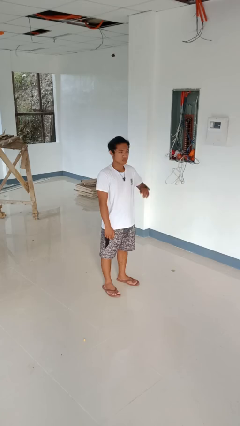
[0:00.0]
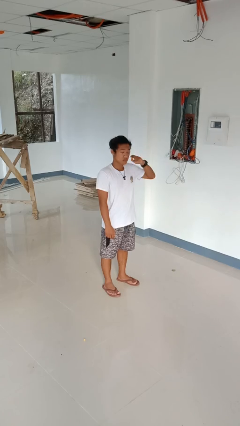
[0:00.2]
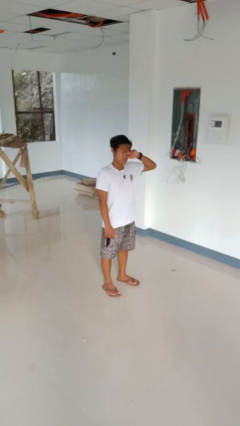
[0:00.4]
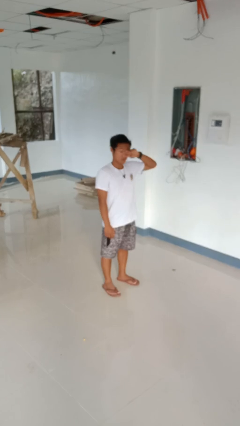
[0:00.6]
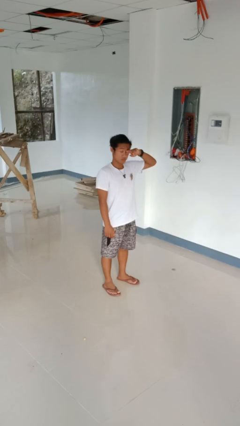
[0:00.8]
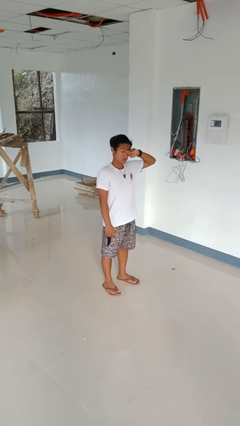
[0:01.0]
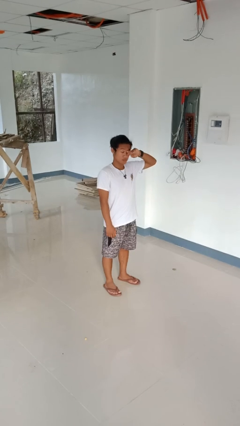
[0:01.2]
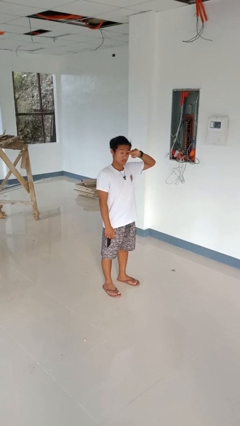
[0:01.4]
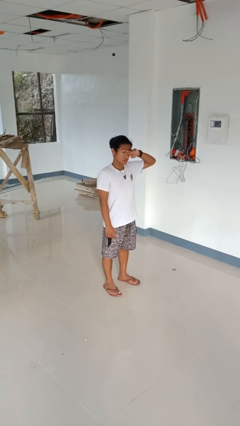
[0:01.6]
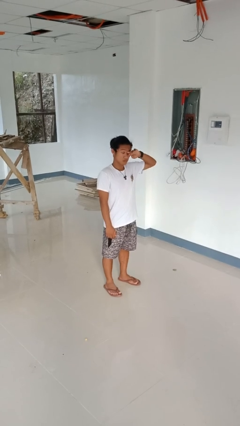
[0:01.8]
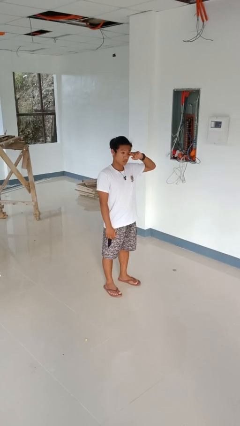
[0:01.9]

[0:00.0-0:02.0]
person rubs eyes

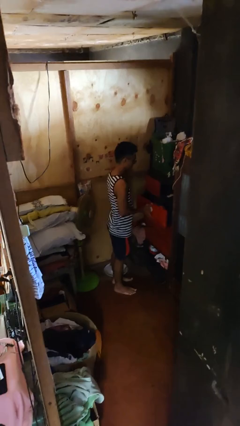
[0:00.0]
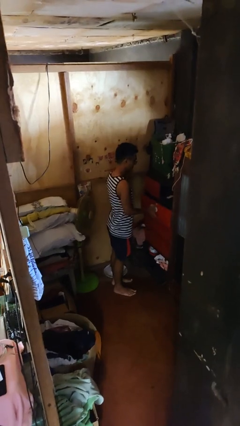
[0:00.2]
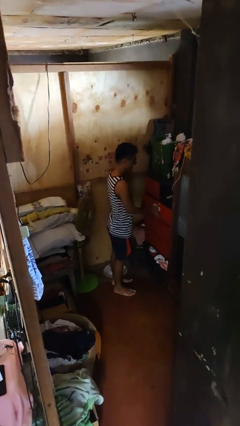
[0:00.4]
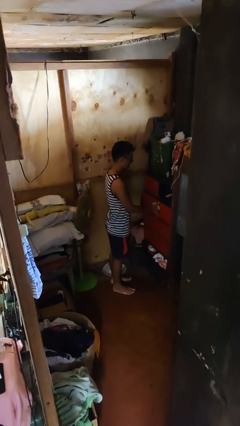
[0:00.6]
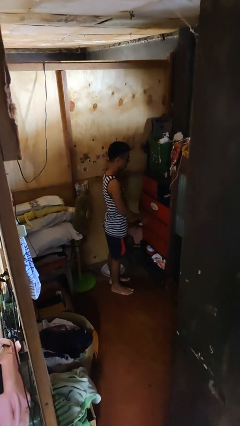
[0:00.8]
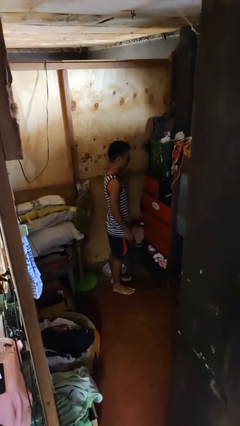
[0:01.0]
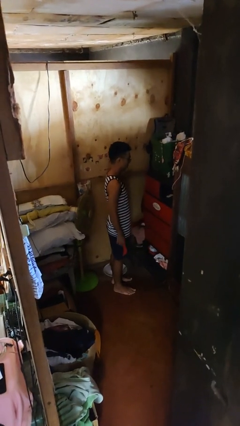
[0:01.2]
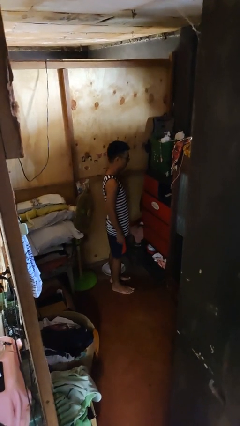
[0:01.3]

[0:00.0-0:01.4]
person closes dresser drawer

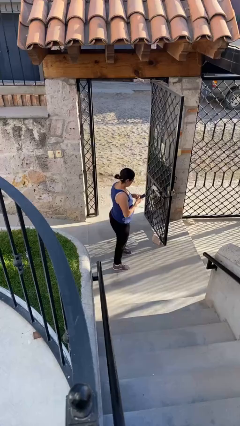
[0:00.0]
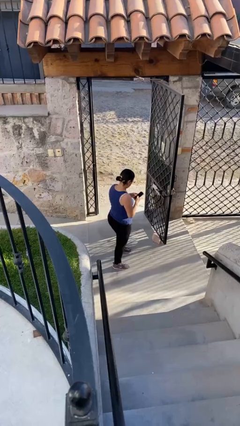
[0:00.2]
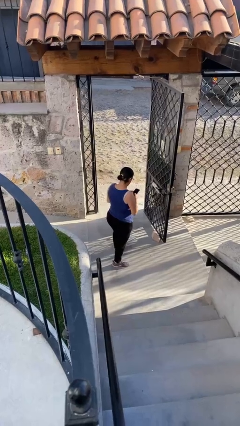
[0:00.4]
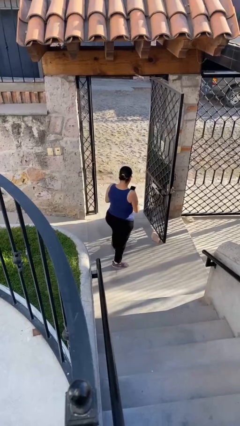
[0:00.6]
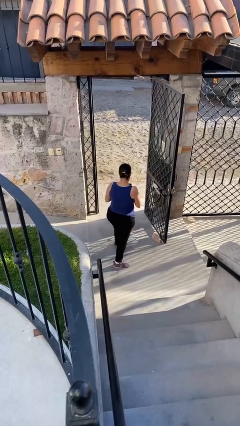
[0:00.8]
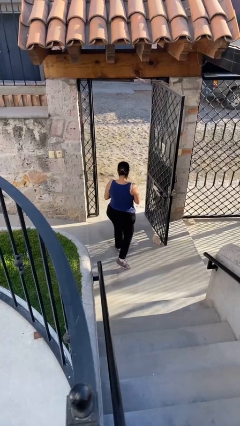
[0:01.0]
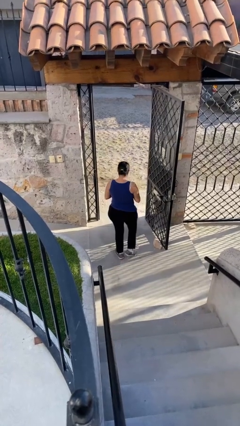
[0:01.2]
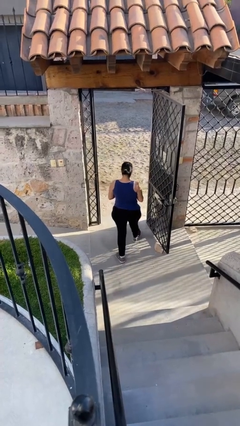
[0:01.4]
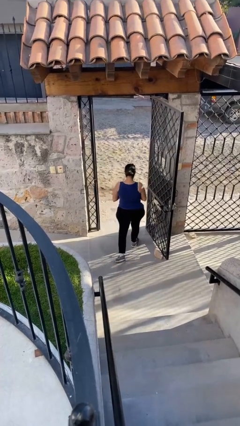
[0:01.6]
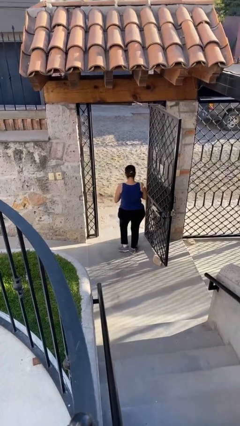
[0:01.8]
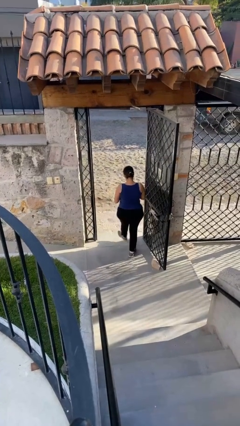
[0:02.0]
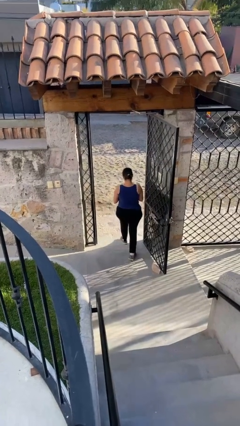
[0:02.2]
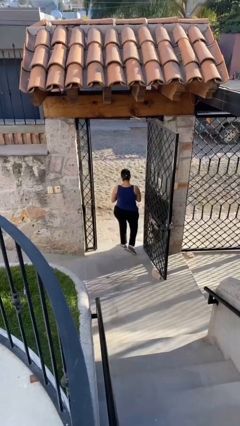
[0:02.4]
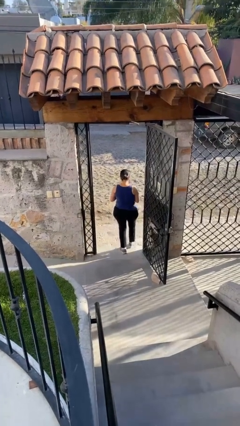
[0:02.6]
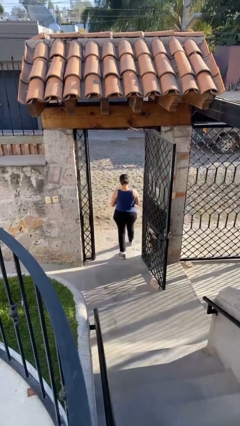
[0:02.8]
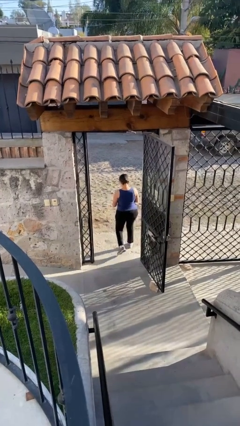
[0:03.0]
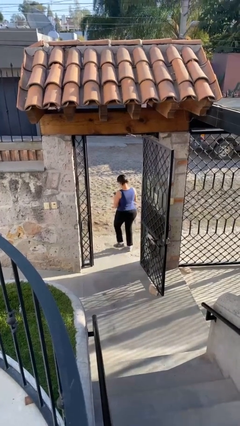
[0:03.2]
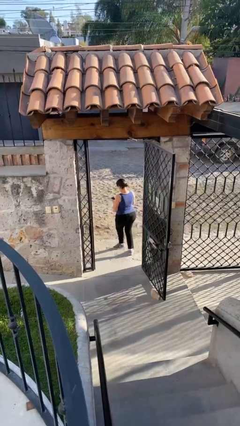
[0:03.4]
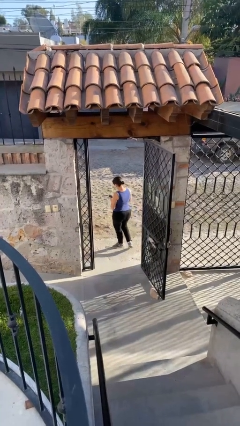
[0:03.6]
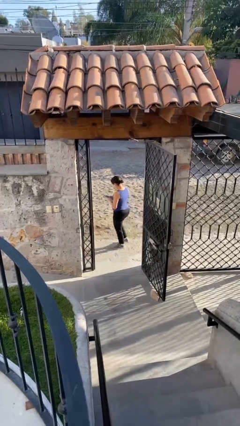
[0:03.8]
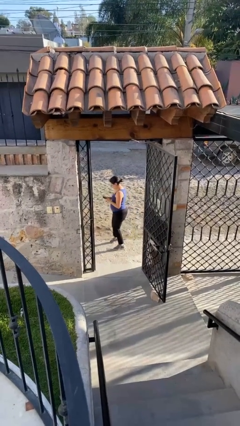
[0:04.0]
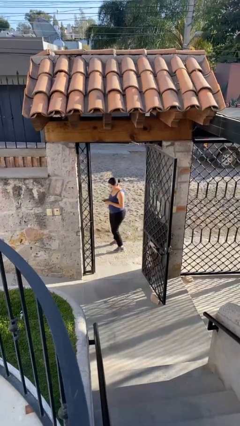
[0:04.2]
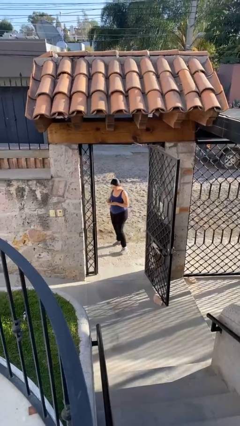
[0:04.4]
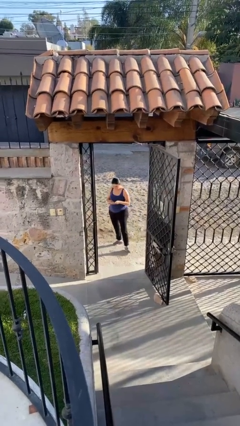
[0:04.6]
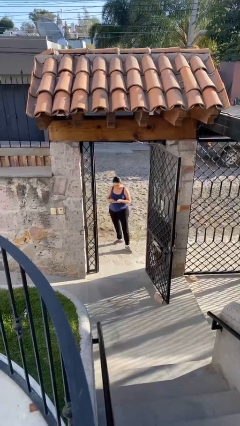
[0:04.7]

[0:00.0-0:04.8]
person exits scene through structure

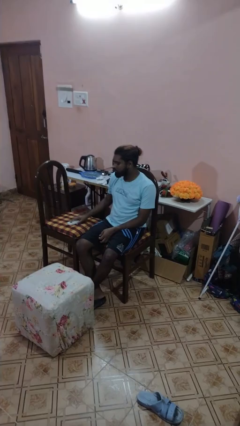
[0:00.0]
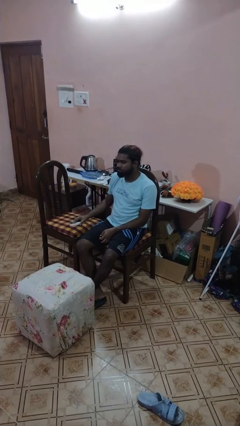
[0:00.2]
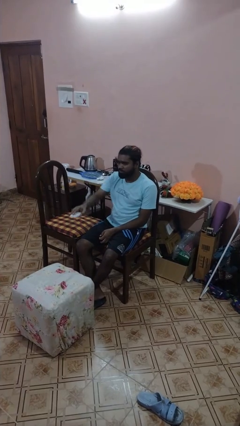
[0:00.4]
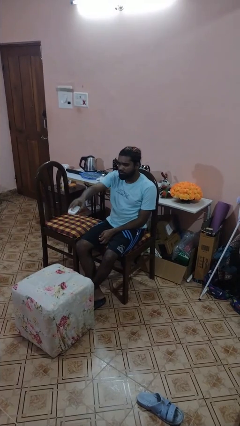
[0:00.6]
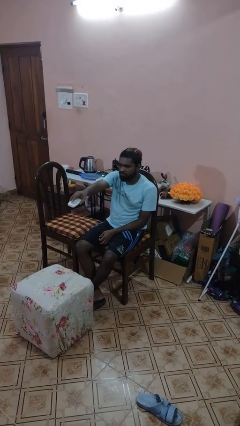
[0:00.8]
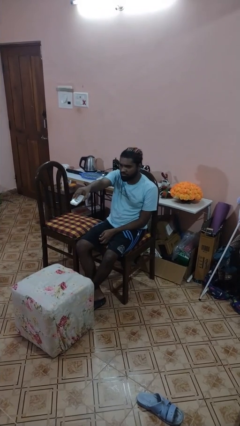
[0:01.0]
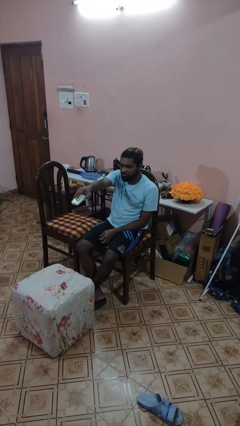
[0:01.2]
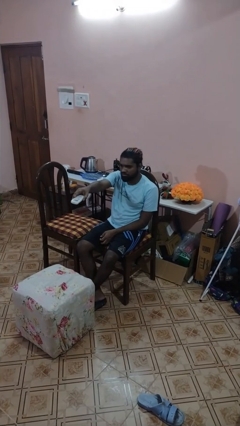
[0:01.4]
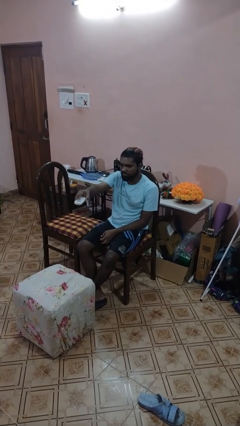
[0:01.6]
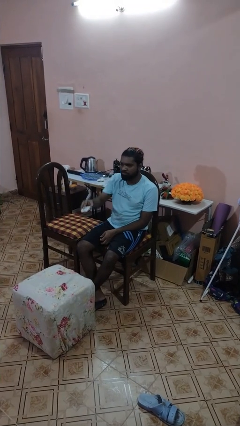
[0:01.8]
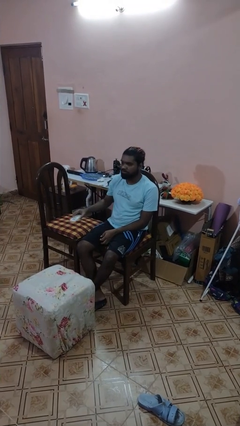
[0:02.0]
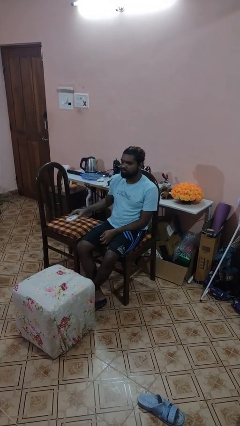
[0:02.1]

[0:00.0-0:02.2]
person uses television remote

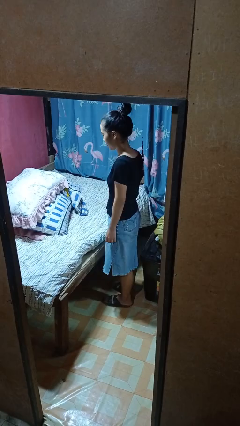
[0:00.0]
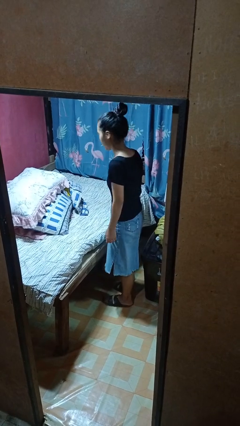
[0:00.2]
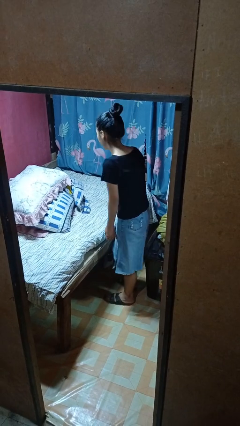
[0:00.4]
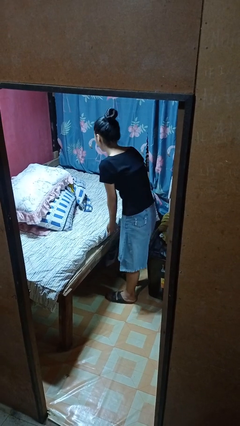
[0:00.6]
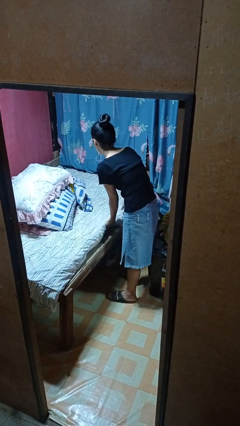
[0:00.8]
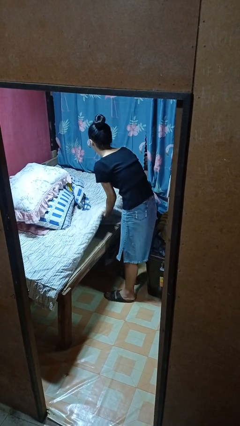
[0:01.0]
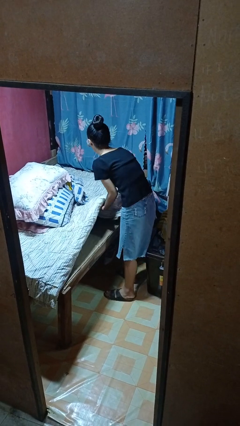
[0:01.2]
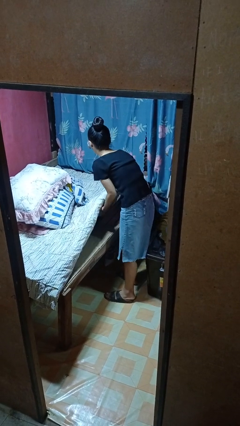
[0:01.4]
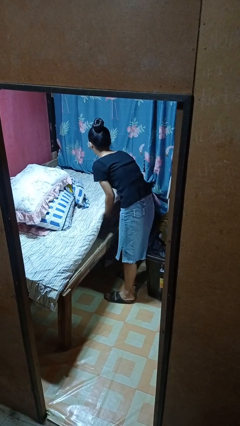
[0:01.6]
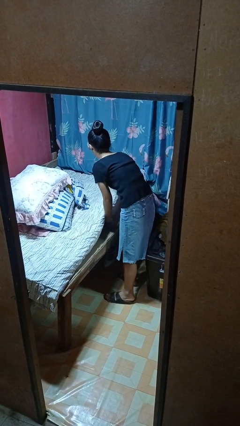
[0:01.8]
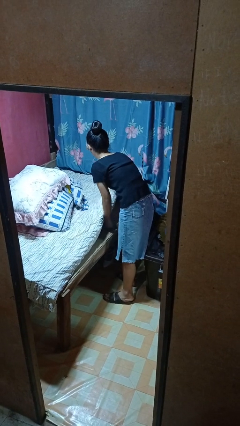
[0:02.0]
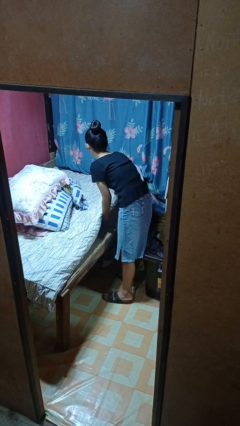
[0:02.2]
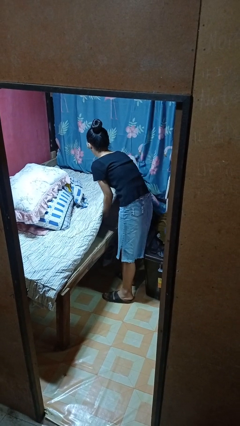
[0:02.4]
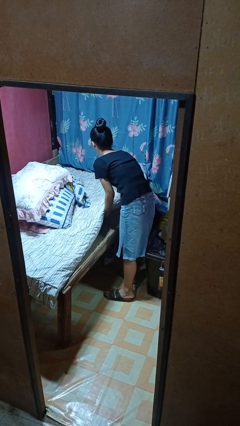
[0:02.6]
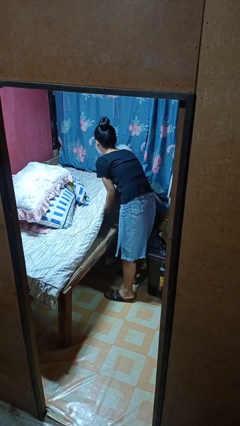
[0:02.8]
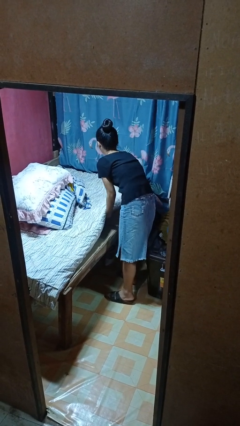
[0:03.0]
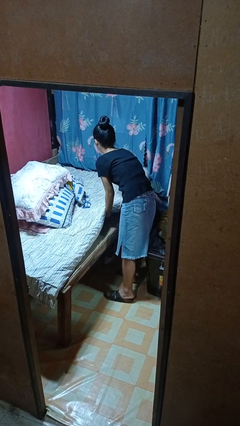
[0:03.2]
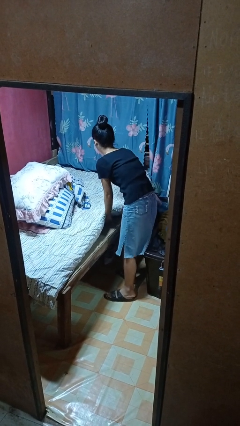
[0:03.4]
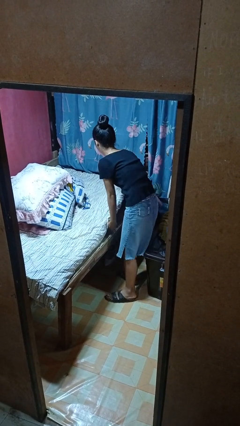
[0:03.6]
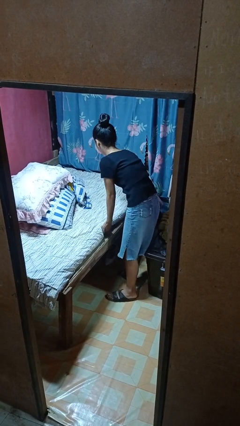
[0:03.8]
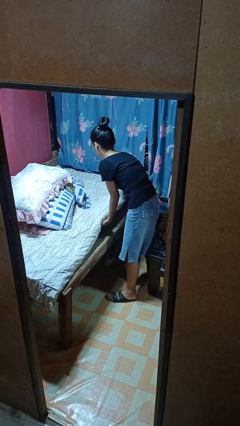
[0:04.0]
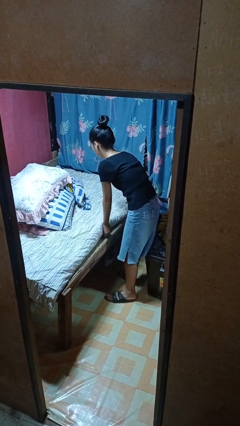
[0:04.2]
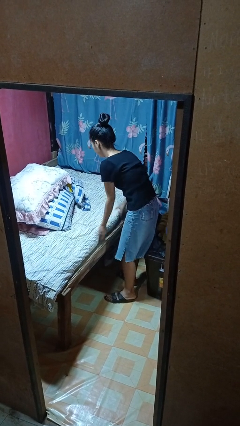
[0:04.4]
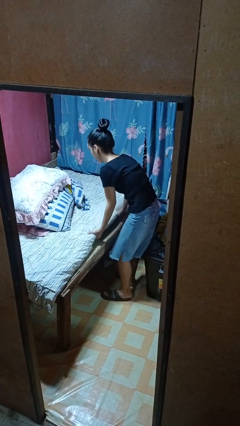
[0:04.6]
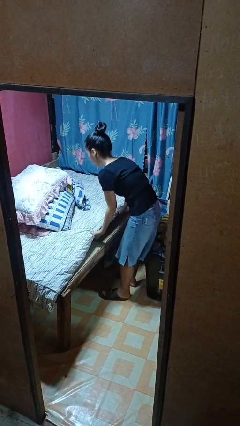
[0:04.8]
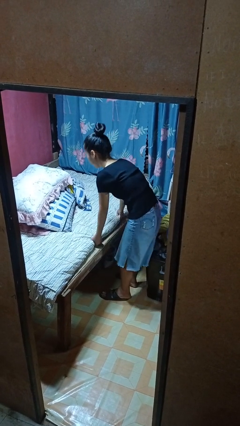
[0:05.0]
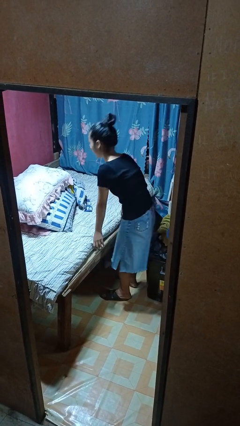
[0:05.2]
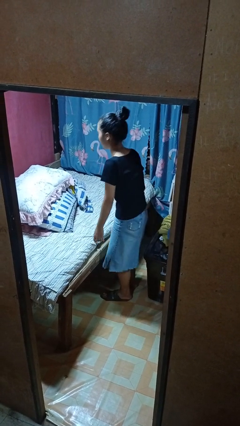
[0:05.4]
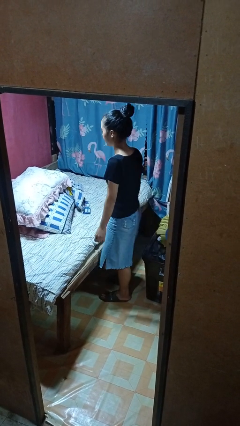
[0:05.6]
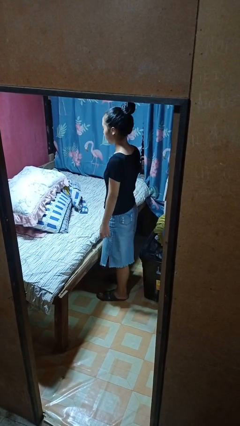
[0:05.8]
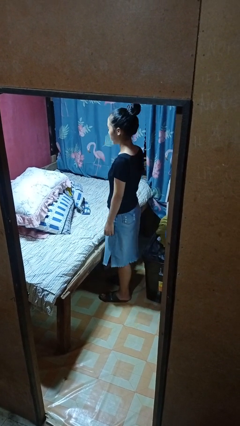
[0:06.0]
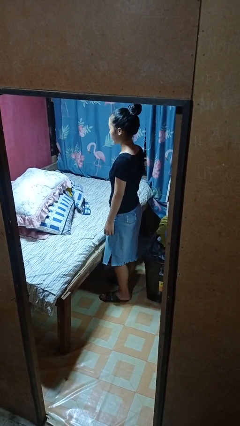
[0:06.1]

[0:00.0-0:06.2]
person makes bed

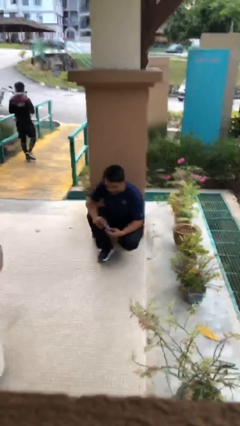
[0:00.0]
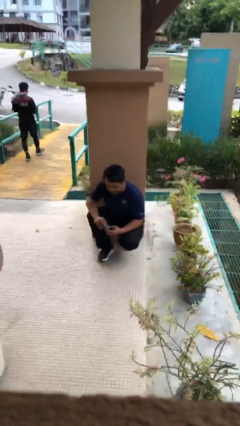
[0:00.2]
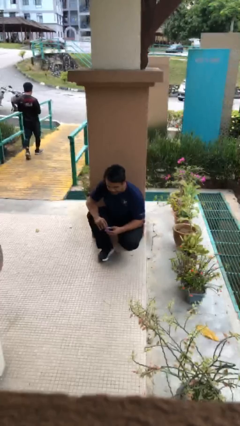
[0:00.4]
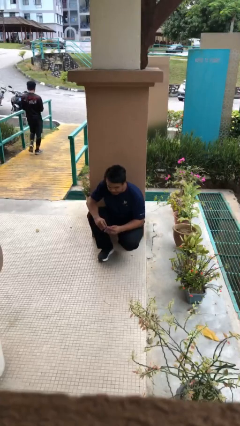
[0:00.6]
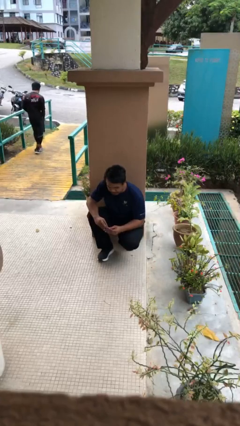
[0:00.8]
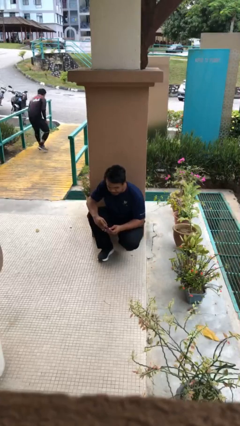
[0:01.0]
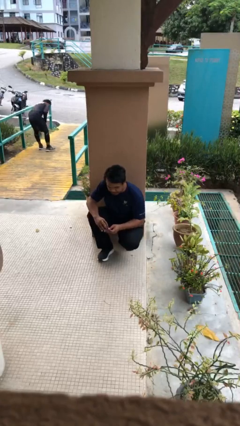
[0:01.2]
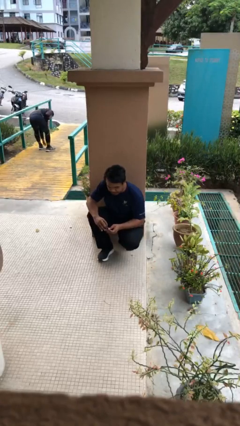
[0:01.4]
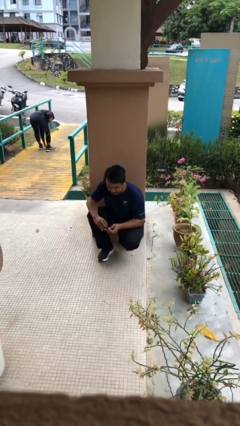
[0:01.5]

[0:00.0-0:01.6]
person shakes hand
